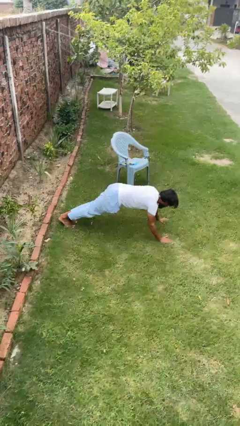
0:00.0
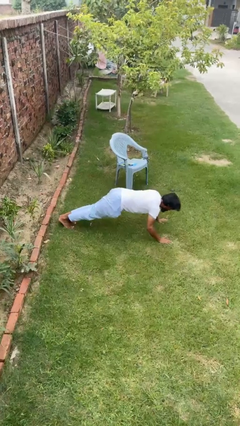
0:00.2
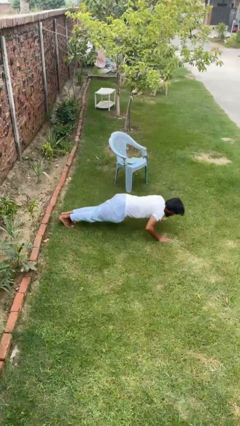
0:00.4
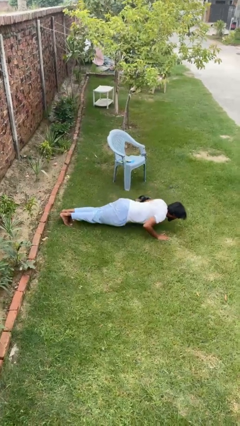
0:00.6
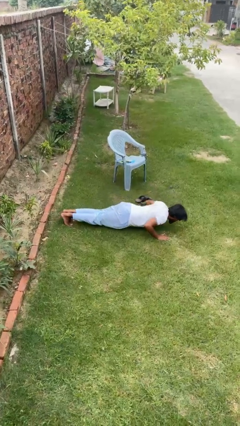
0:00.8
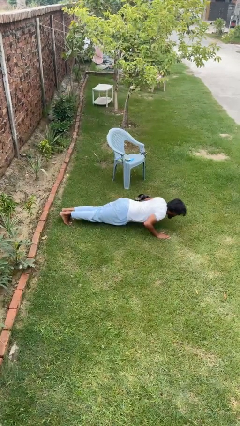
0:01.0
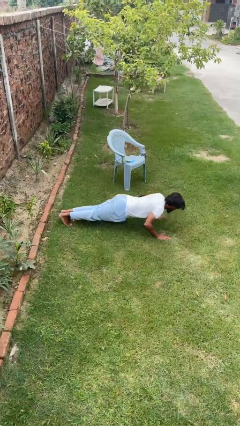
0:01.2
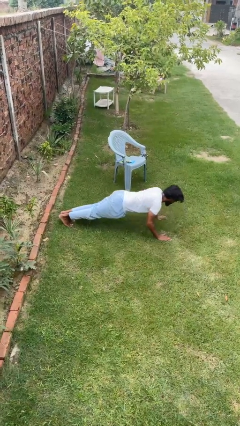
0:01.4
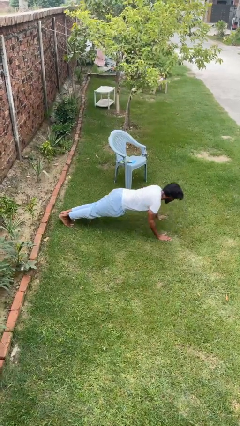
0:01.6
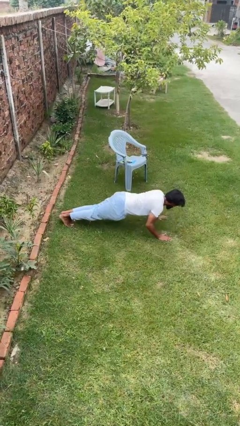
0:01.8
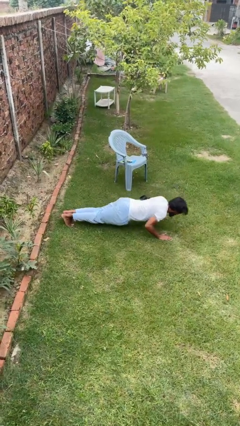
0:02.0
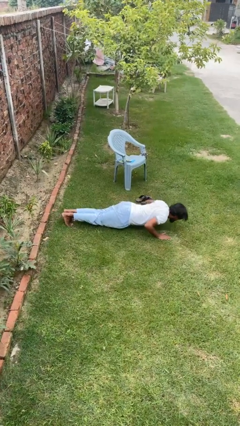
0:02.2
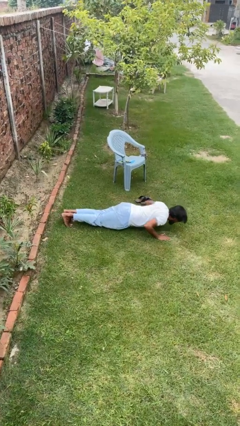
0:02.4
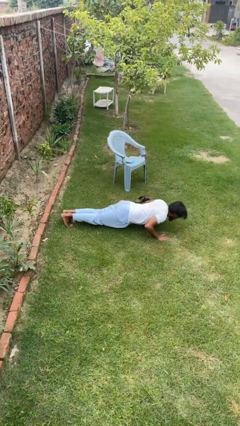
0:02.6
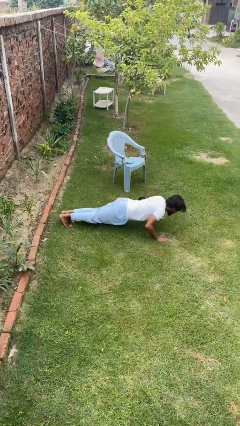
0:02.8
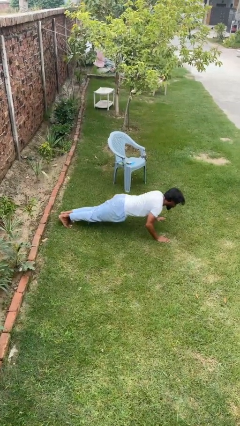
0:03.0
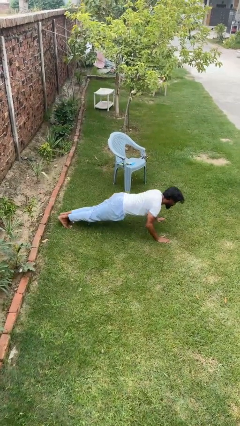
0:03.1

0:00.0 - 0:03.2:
person exercises with pushup

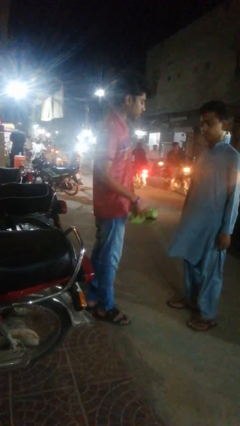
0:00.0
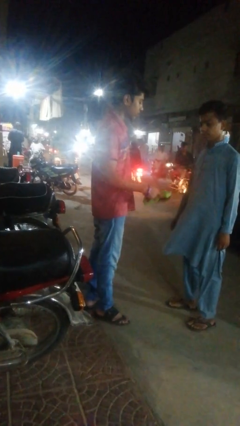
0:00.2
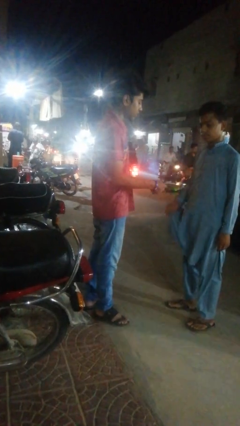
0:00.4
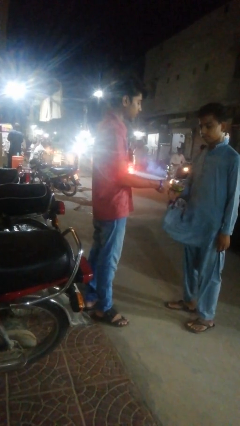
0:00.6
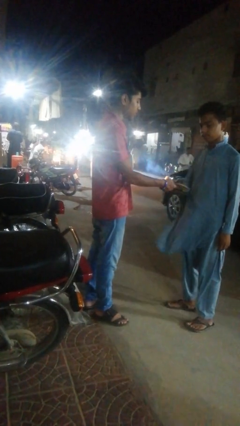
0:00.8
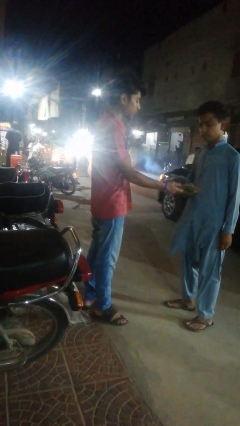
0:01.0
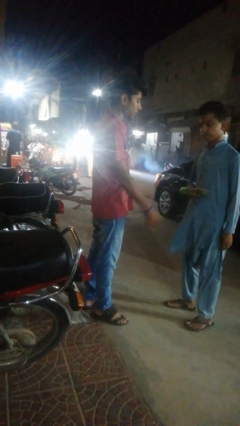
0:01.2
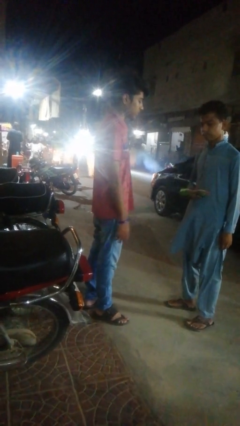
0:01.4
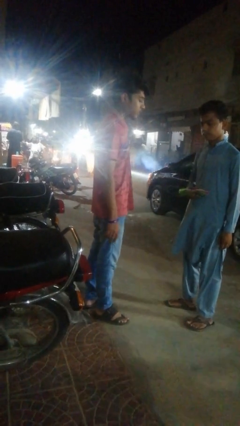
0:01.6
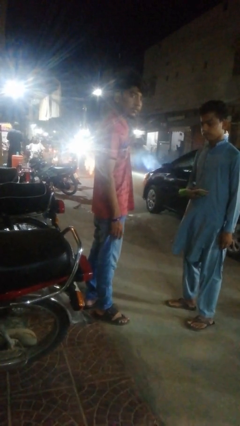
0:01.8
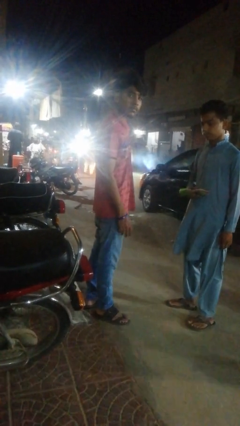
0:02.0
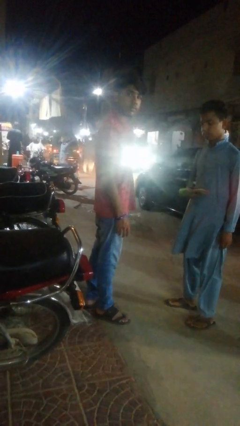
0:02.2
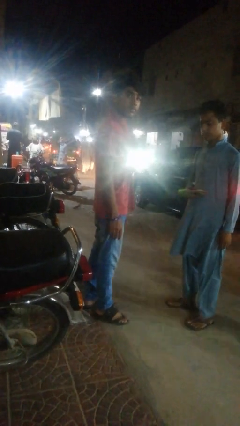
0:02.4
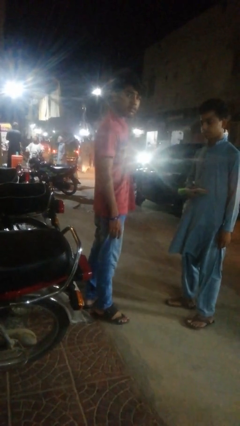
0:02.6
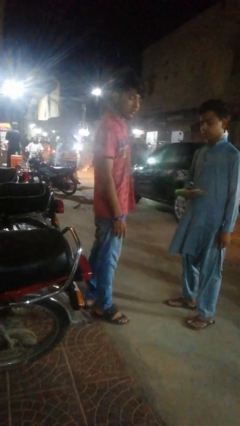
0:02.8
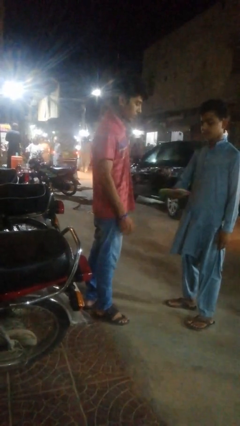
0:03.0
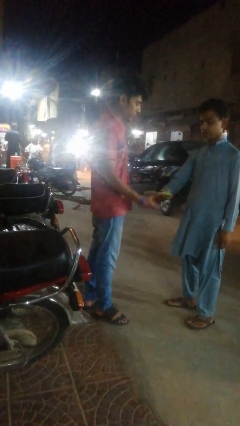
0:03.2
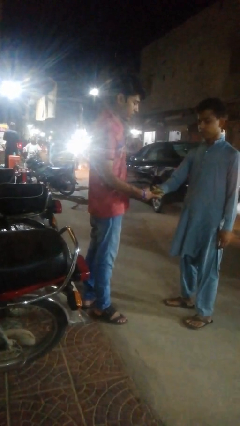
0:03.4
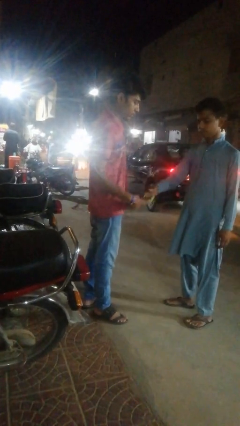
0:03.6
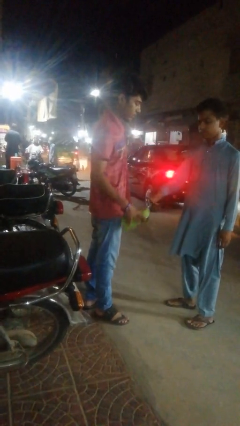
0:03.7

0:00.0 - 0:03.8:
person transfers object to person

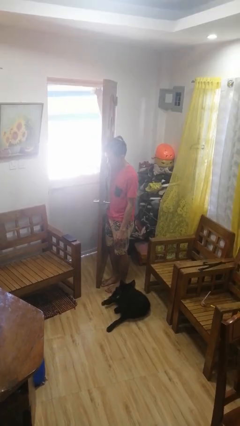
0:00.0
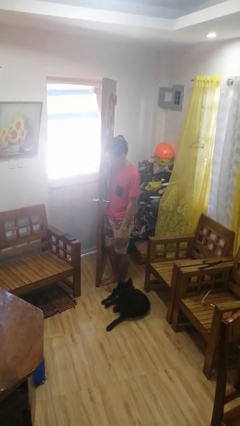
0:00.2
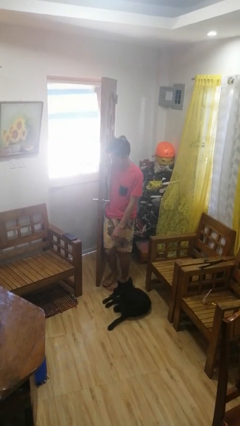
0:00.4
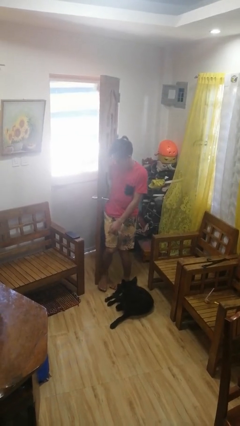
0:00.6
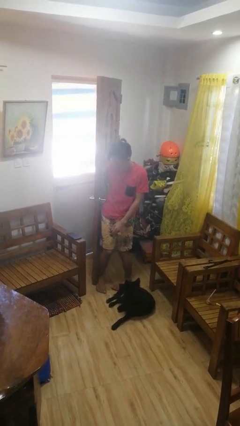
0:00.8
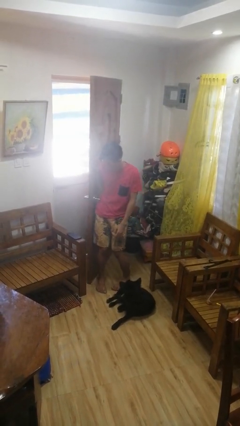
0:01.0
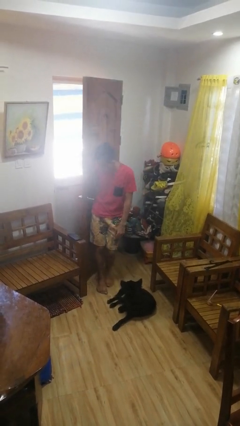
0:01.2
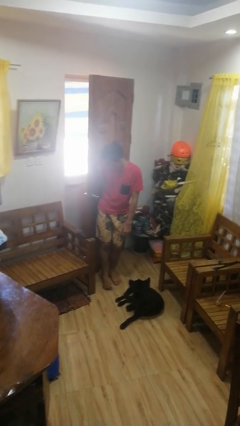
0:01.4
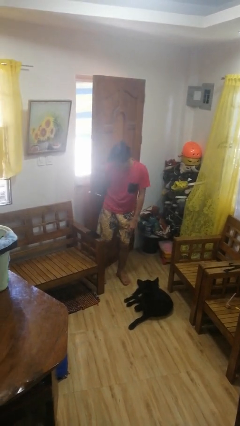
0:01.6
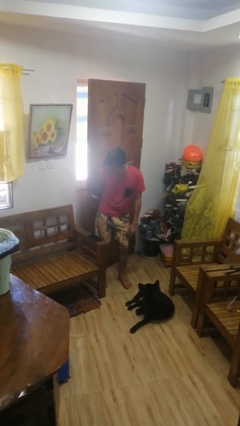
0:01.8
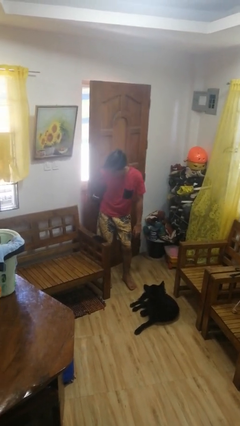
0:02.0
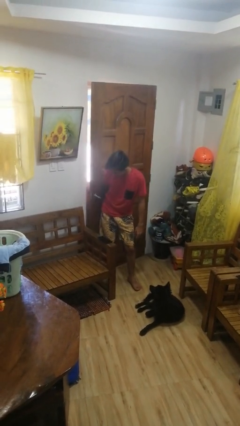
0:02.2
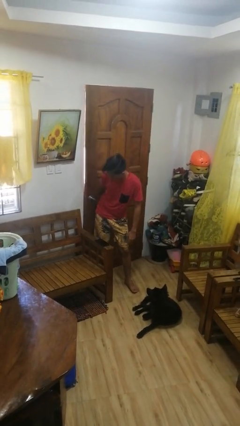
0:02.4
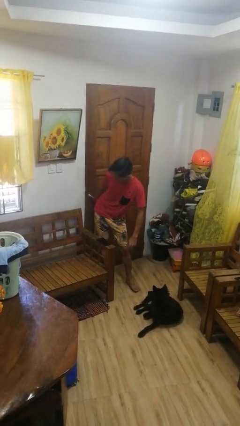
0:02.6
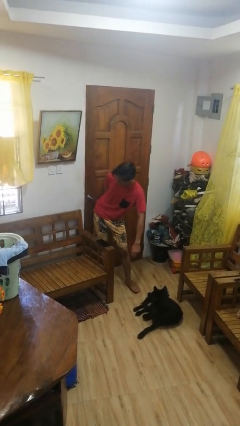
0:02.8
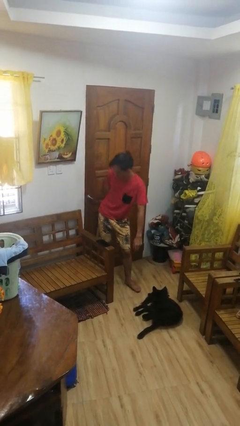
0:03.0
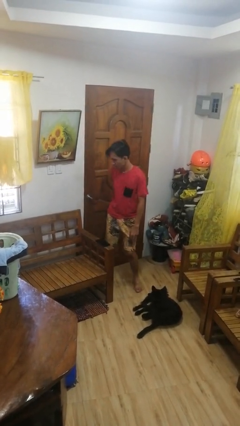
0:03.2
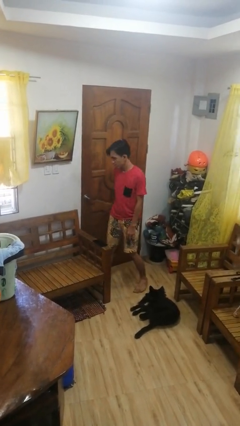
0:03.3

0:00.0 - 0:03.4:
person closes door with hip

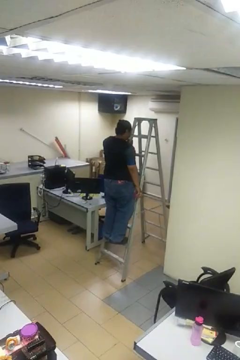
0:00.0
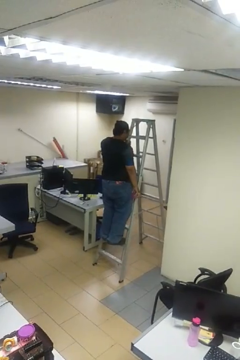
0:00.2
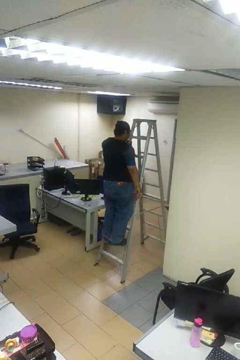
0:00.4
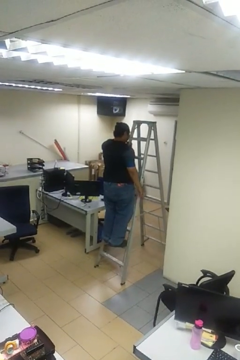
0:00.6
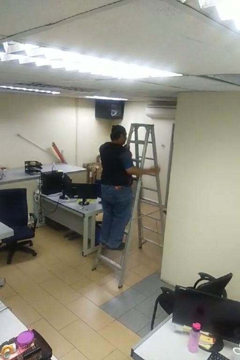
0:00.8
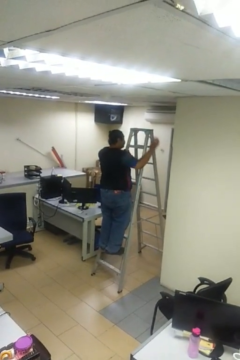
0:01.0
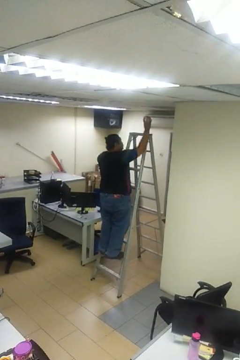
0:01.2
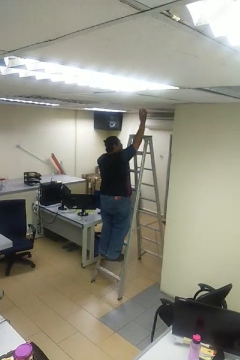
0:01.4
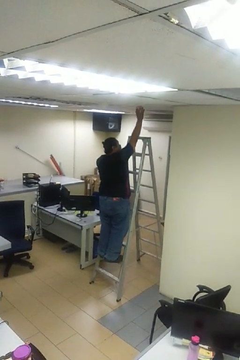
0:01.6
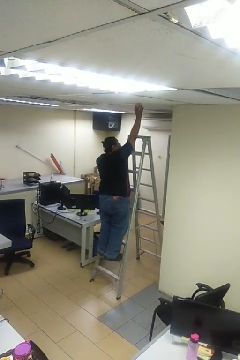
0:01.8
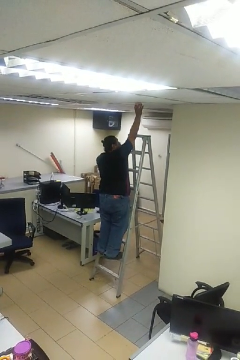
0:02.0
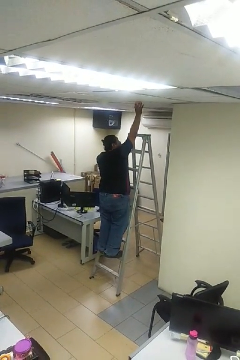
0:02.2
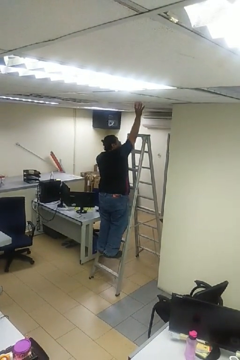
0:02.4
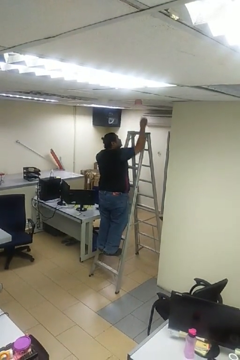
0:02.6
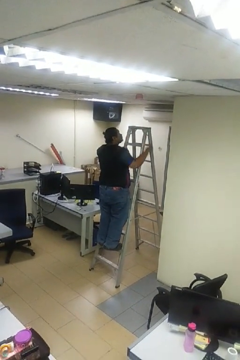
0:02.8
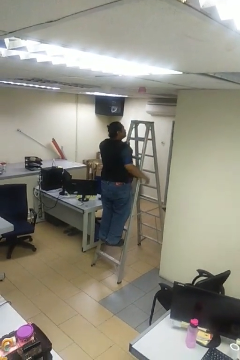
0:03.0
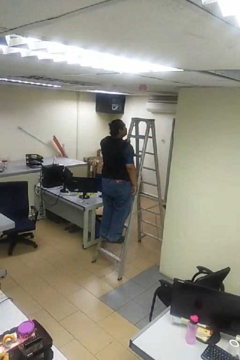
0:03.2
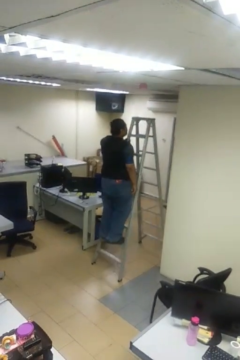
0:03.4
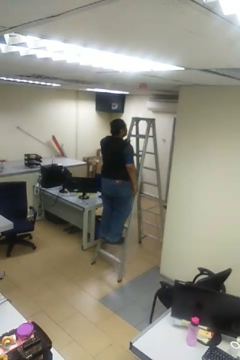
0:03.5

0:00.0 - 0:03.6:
person puts up smoke detector

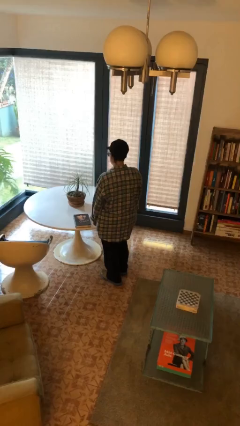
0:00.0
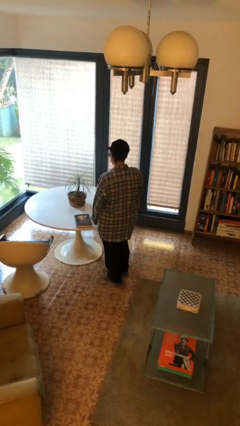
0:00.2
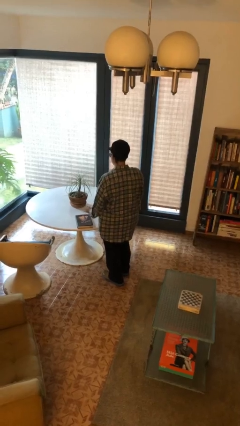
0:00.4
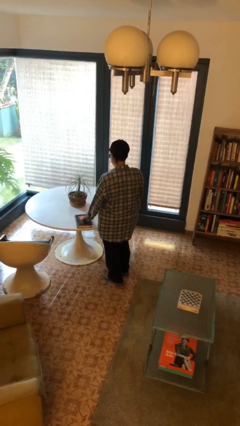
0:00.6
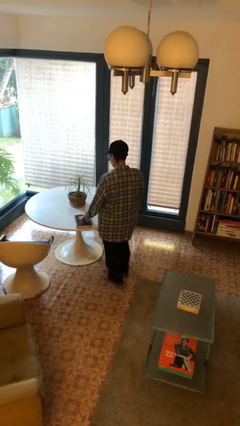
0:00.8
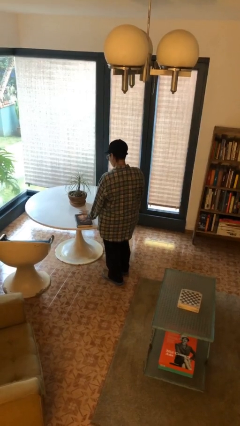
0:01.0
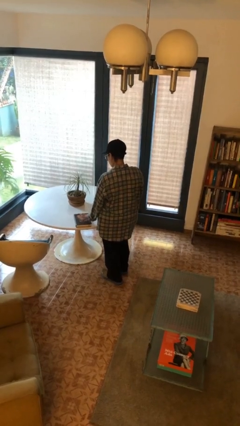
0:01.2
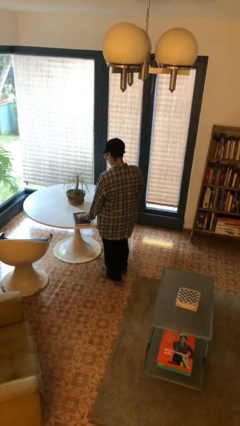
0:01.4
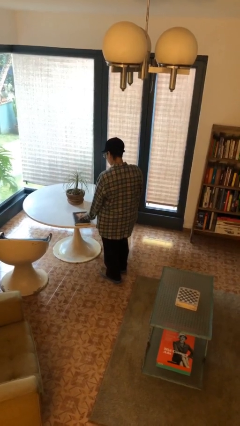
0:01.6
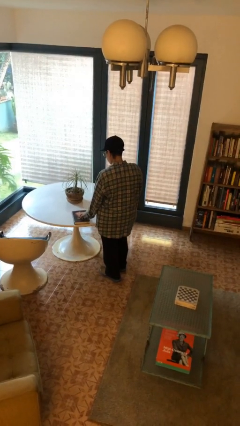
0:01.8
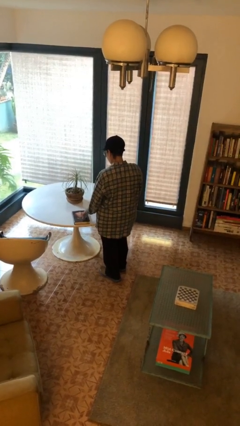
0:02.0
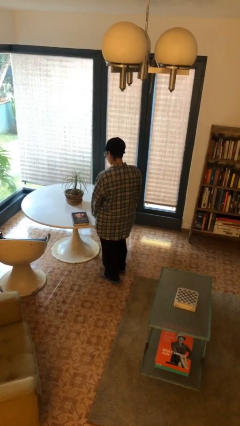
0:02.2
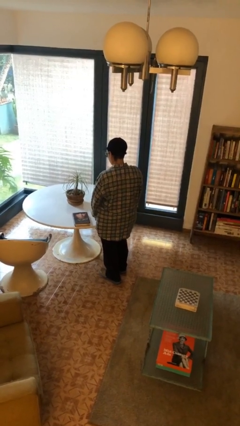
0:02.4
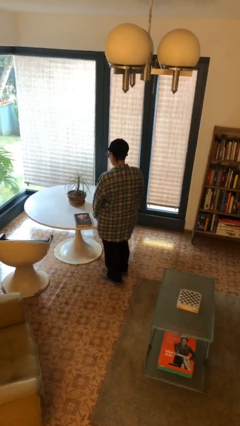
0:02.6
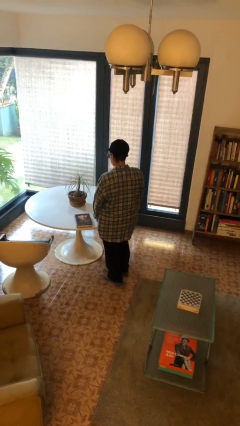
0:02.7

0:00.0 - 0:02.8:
person taps object with finger

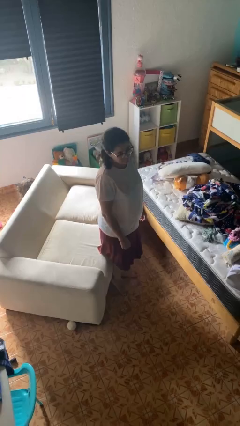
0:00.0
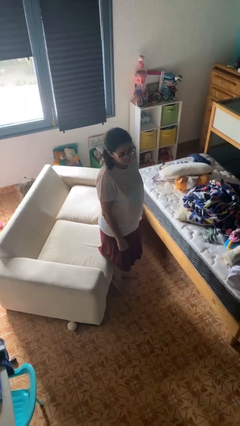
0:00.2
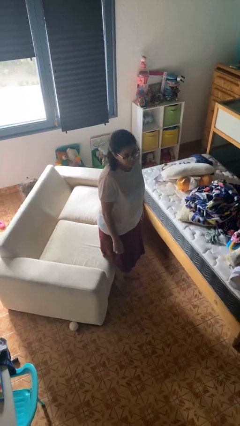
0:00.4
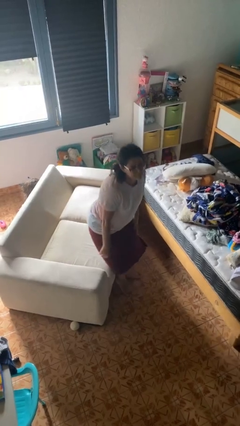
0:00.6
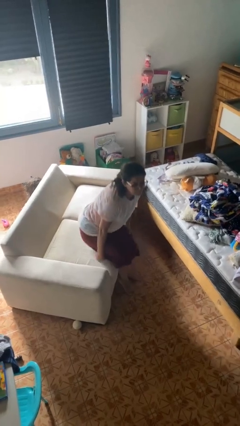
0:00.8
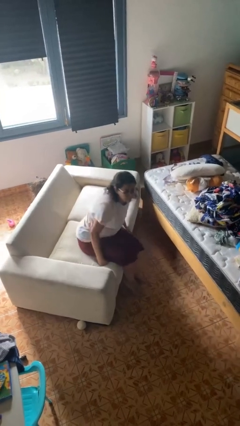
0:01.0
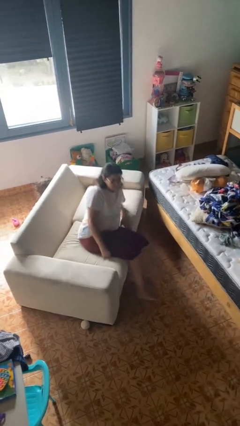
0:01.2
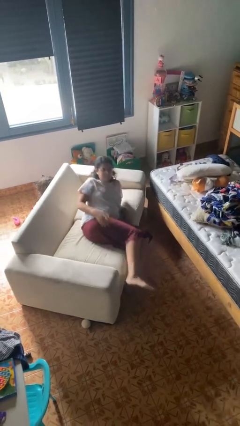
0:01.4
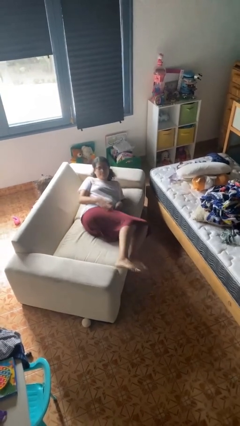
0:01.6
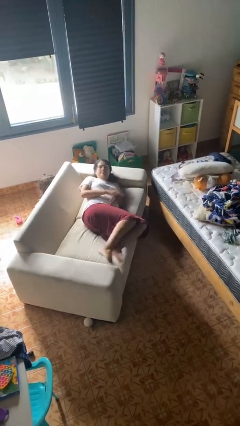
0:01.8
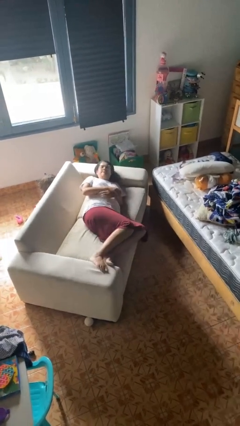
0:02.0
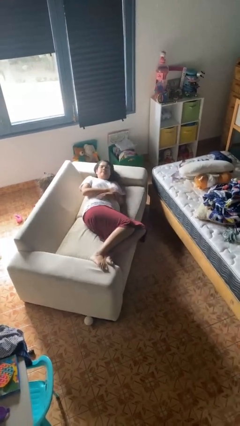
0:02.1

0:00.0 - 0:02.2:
person lies down on couch
